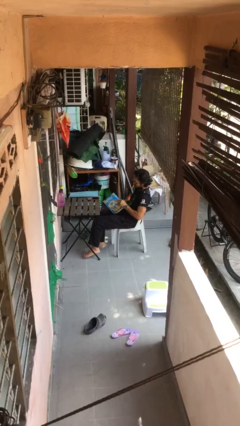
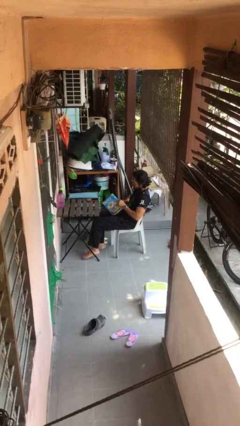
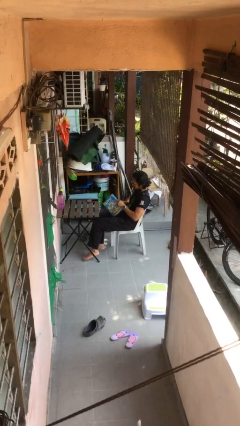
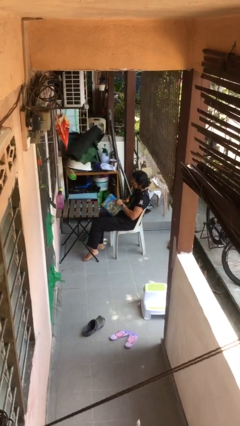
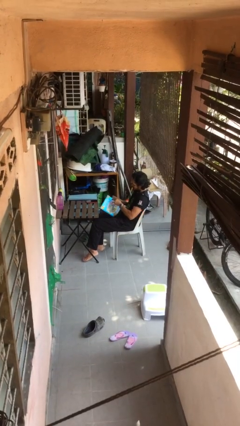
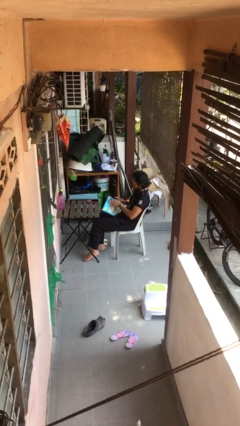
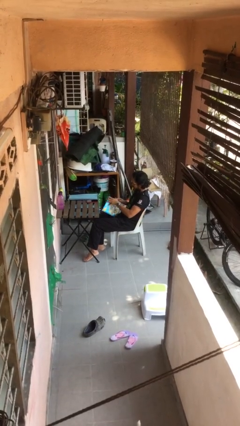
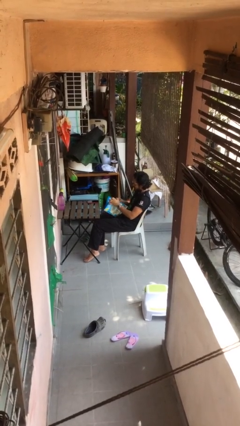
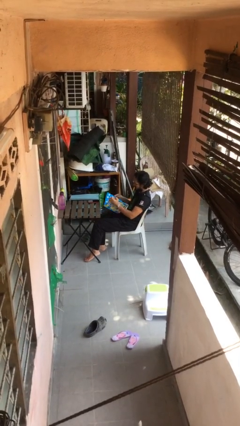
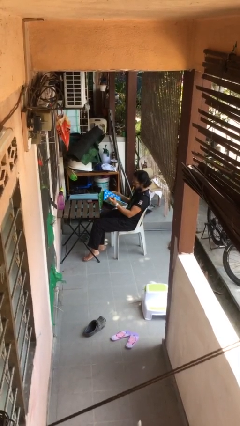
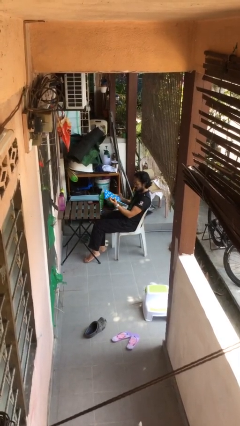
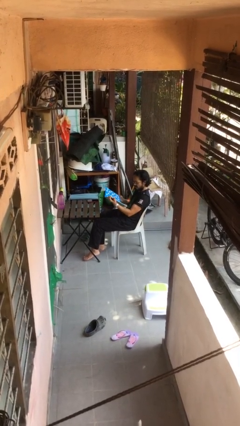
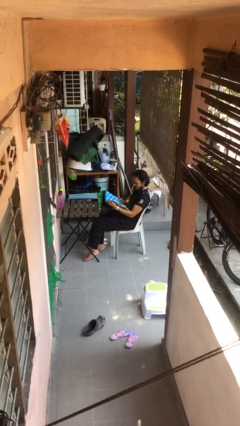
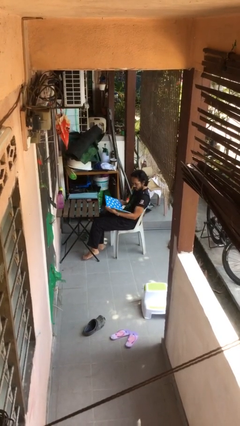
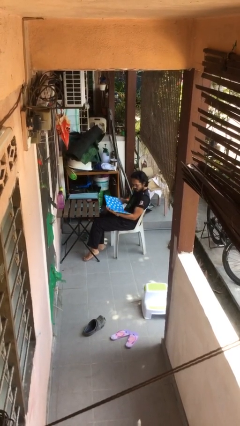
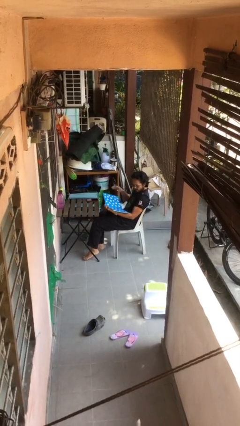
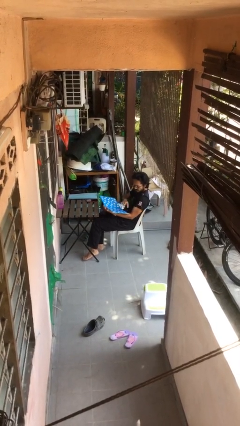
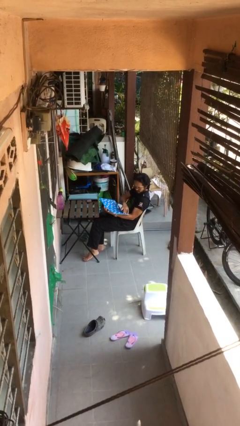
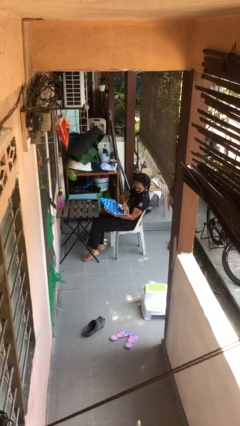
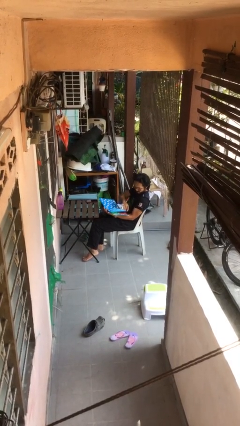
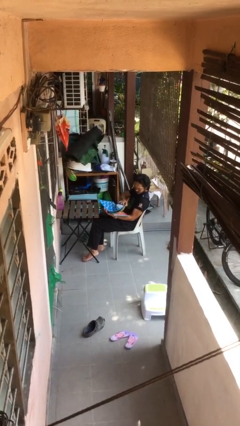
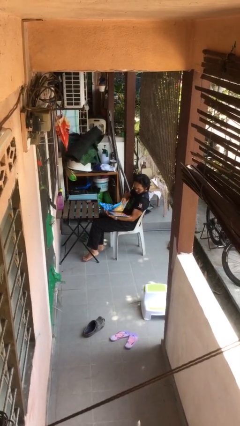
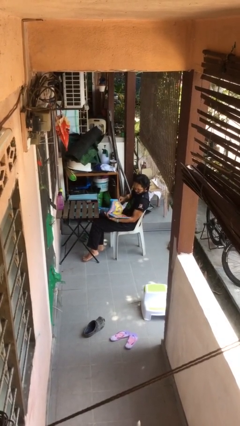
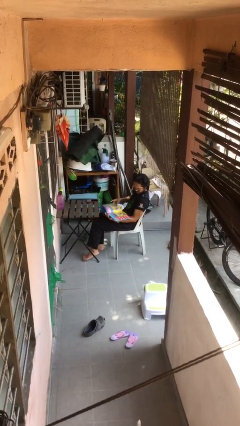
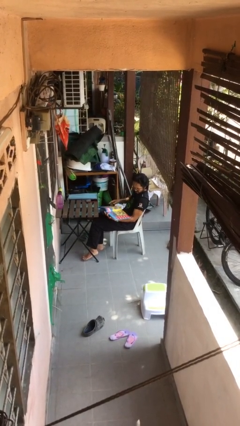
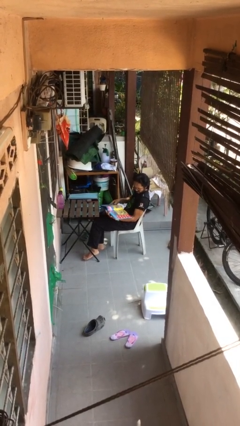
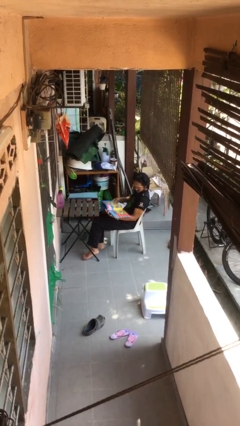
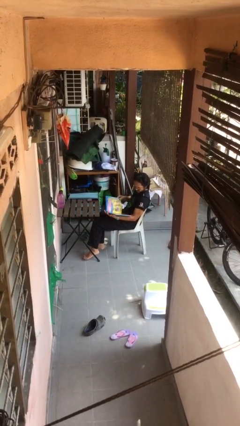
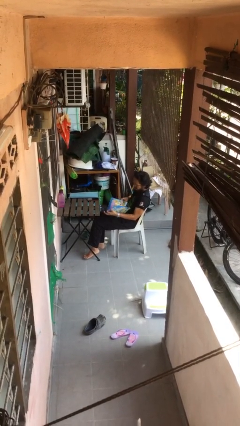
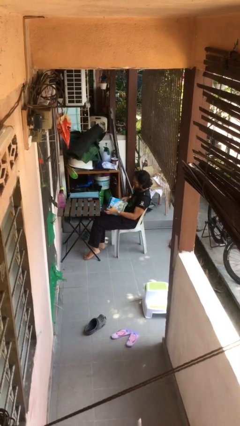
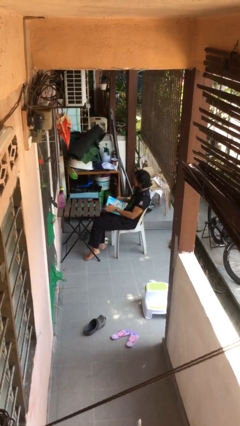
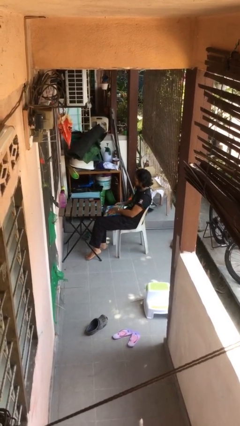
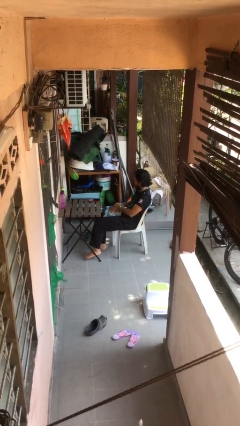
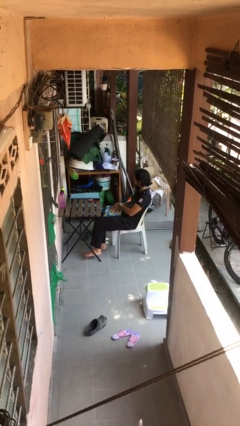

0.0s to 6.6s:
person reads document

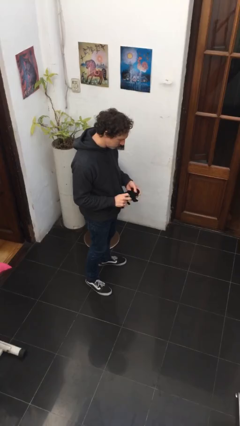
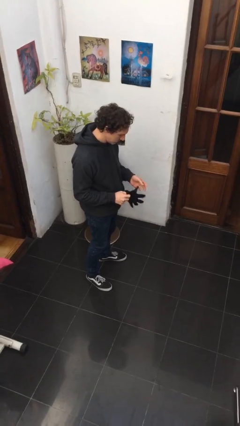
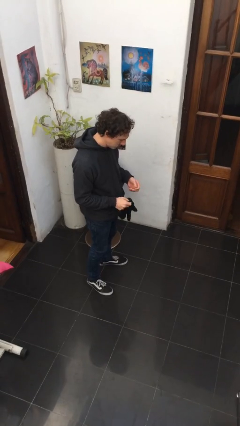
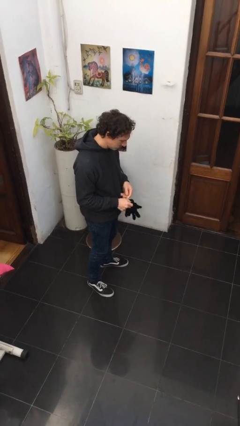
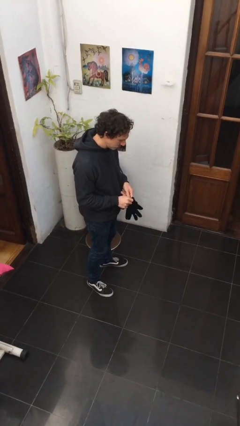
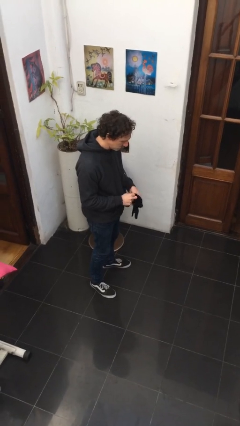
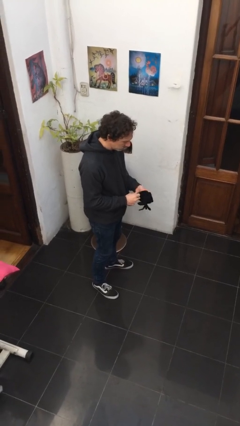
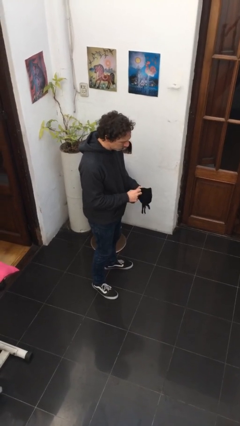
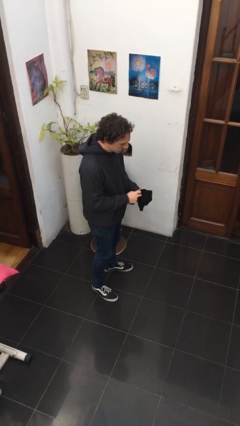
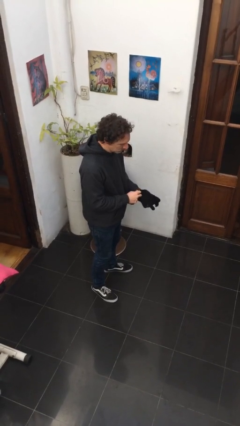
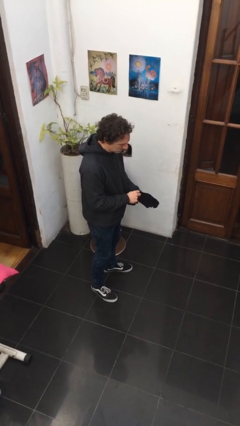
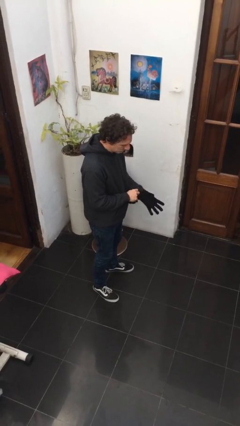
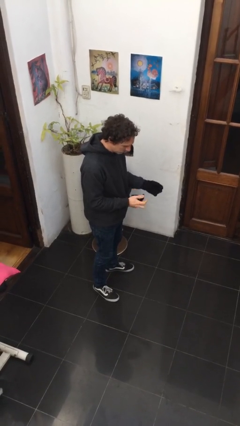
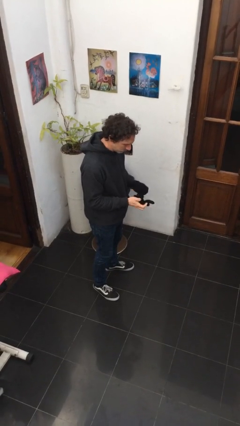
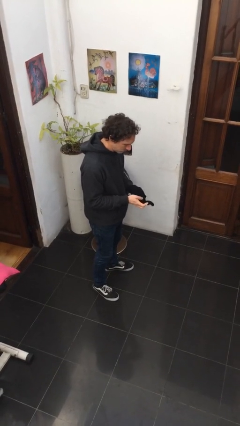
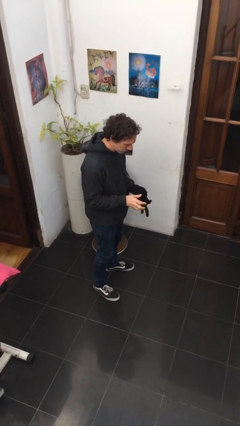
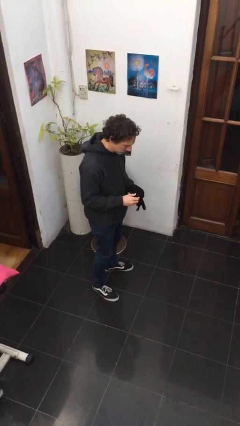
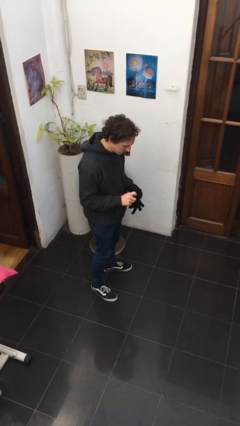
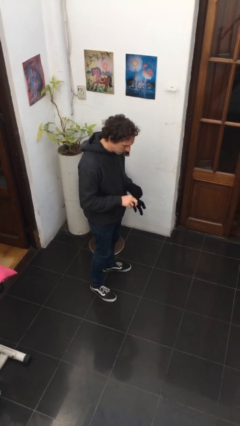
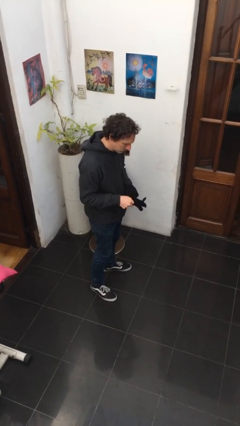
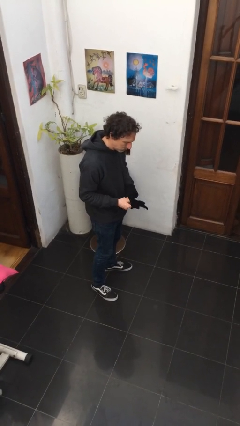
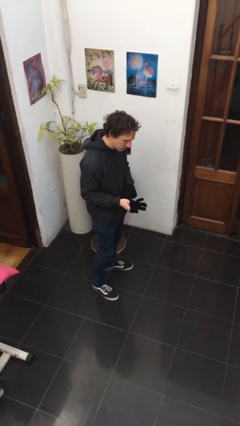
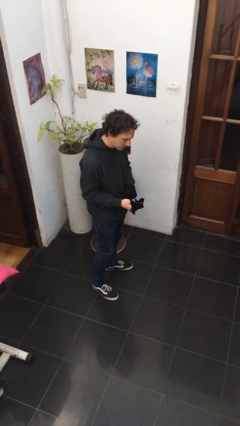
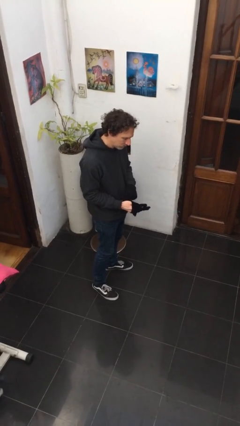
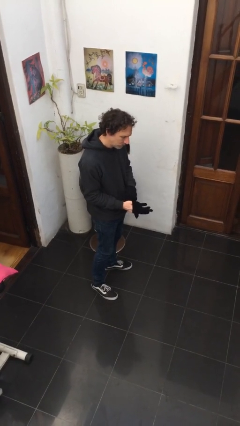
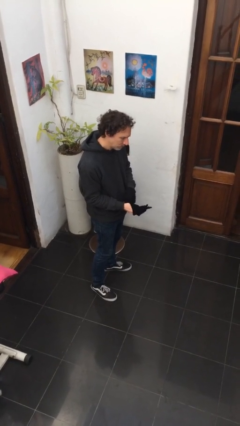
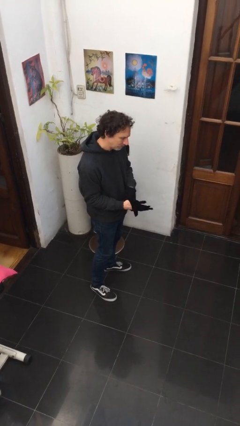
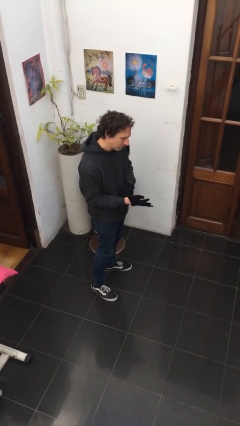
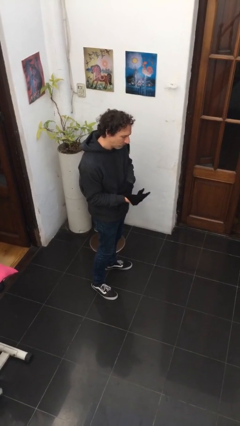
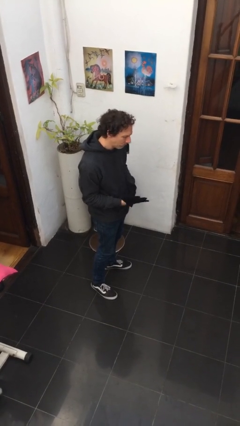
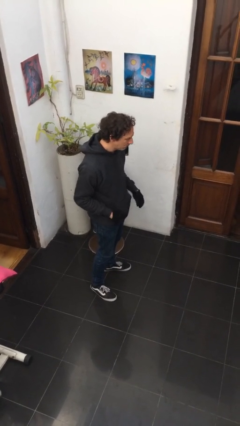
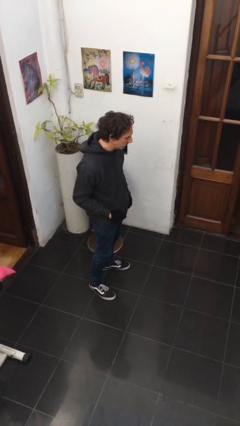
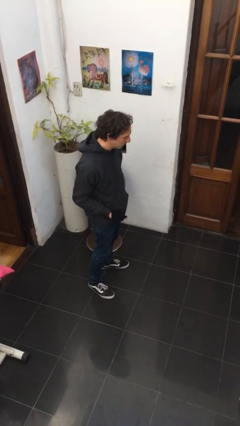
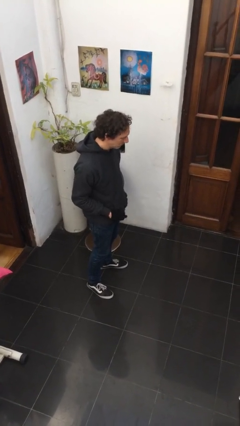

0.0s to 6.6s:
person puts on gloves

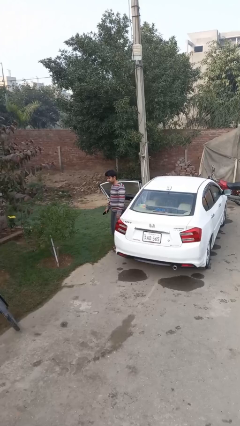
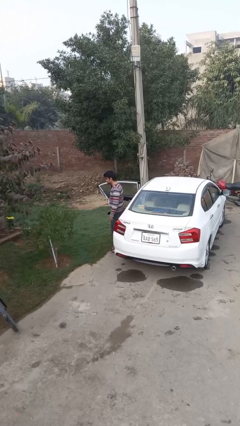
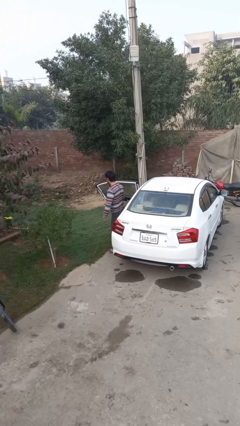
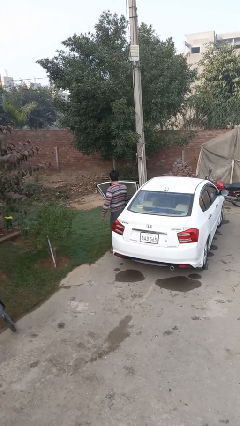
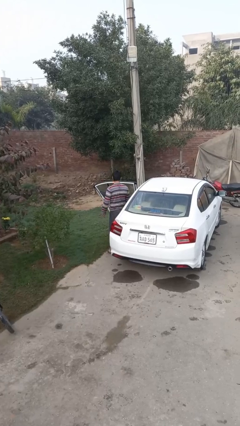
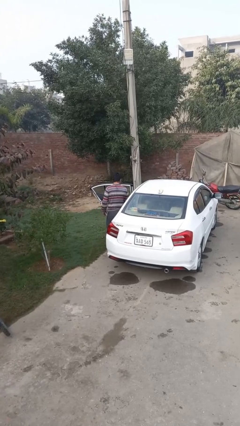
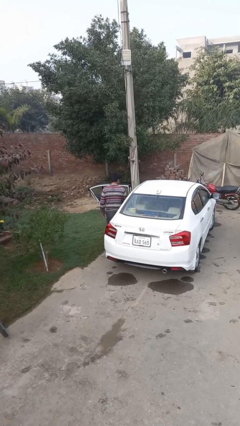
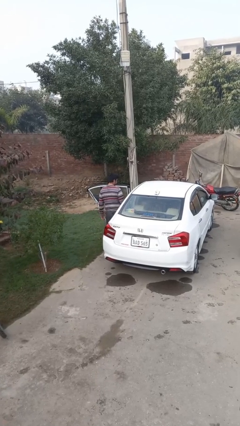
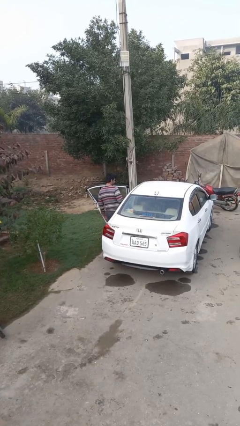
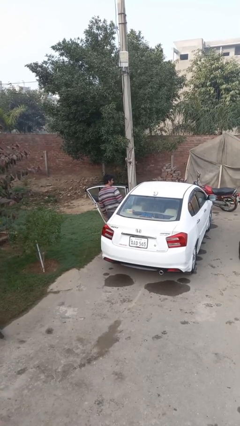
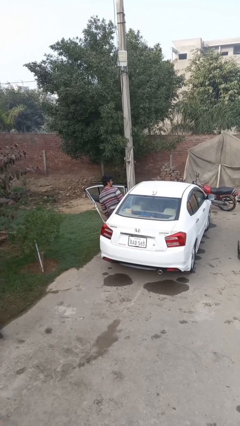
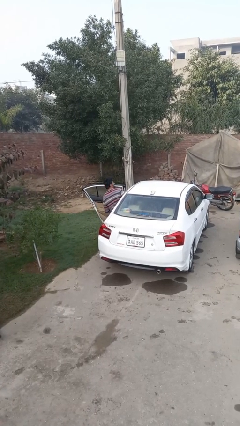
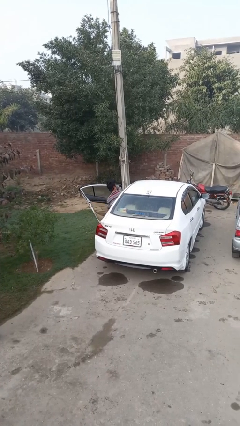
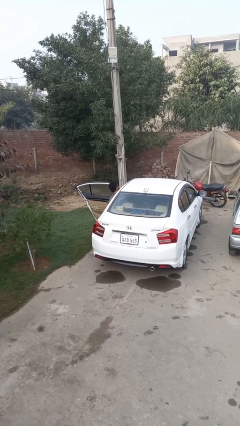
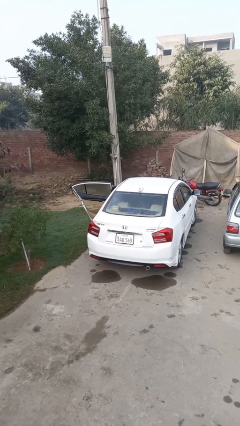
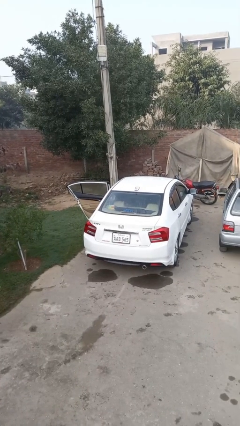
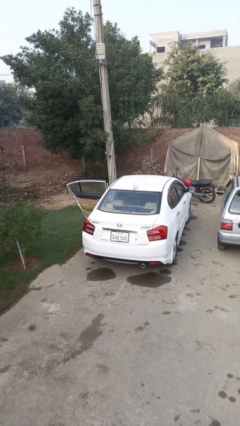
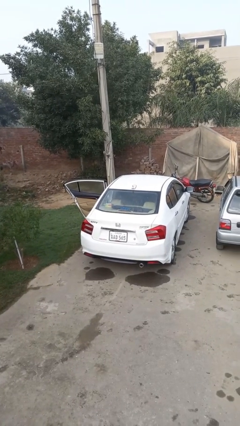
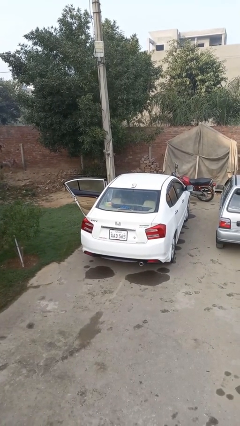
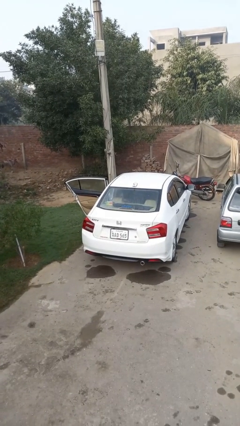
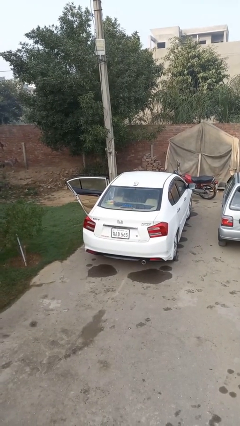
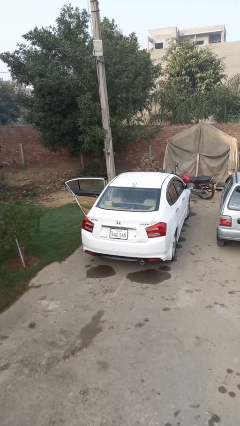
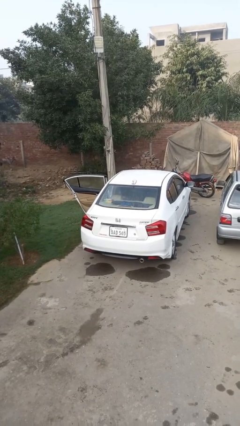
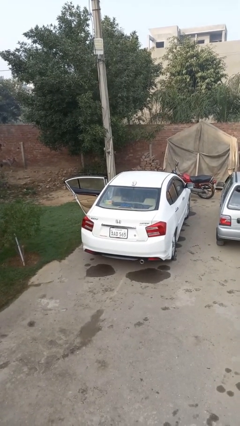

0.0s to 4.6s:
person enters car
